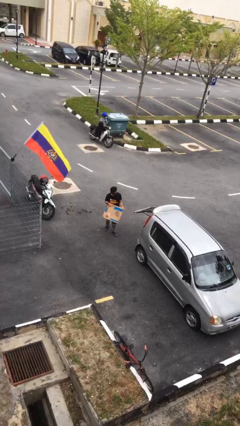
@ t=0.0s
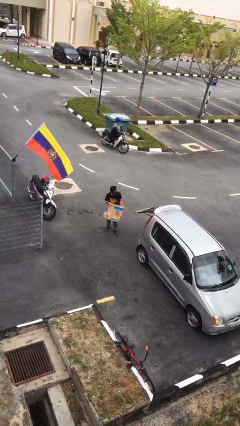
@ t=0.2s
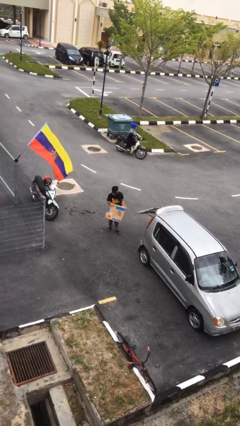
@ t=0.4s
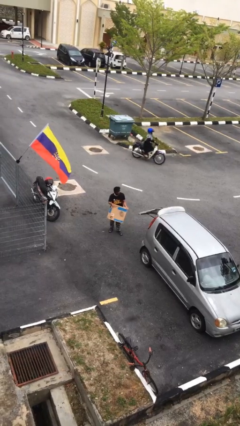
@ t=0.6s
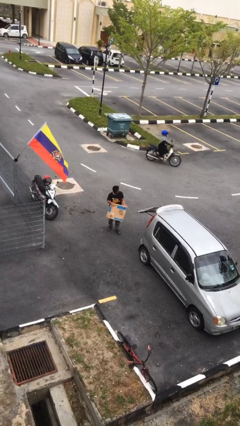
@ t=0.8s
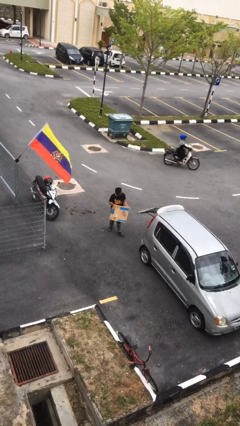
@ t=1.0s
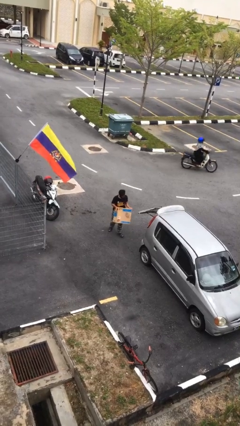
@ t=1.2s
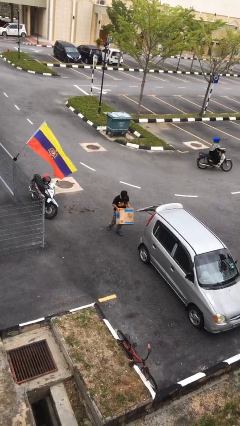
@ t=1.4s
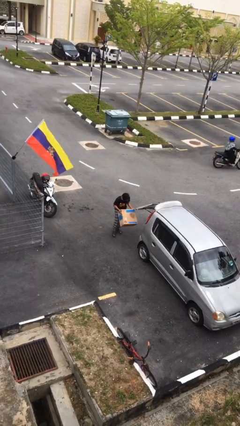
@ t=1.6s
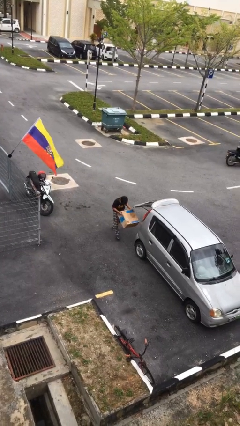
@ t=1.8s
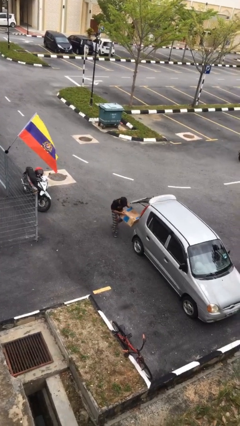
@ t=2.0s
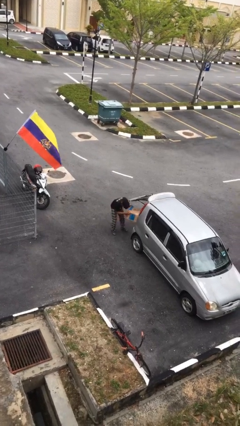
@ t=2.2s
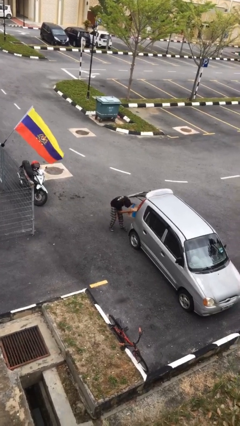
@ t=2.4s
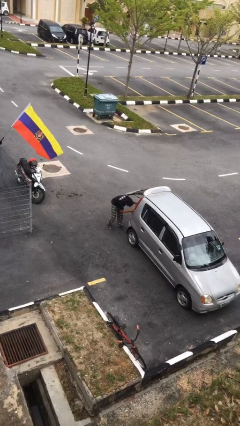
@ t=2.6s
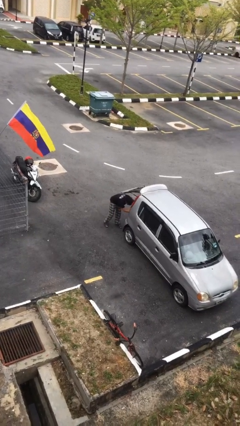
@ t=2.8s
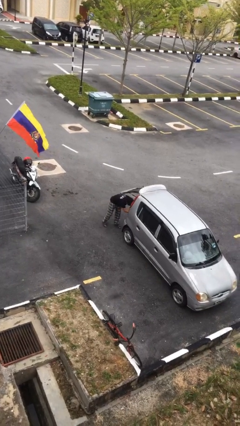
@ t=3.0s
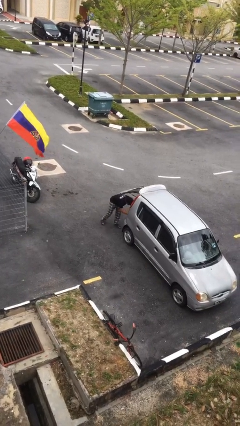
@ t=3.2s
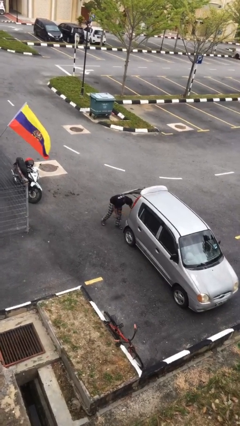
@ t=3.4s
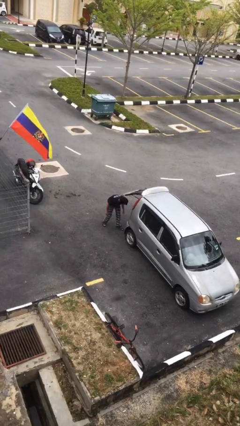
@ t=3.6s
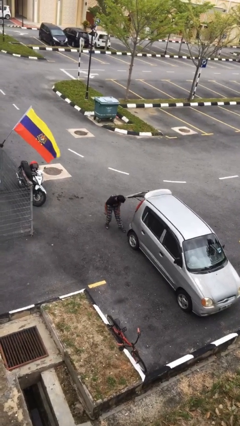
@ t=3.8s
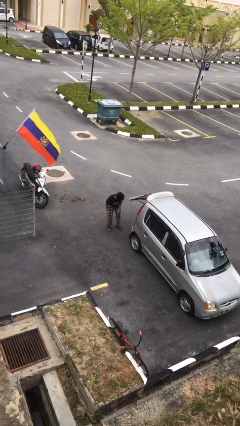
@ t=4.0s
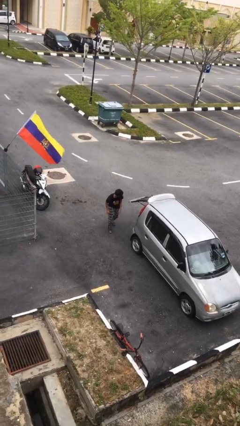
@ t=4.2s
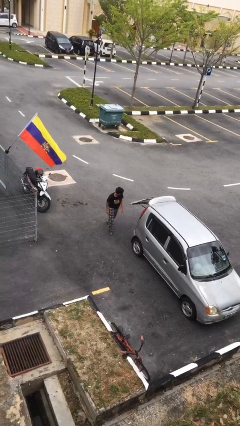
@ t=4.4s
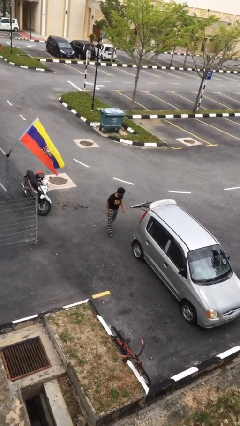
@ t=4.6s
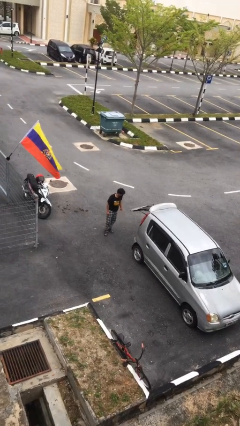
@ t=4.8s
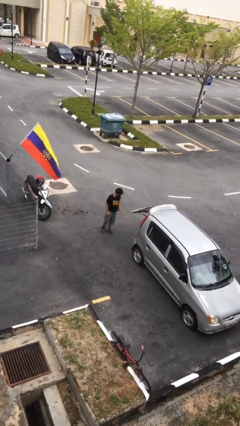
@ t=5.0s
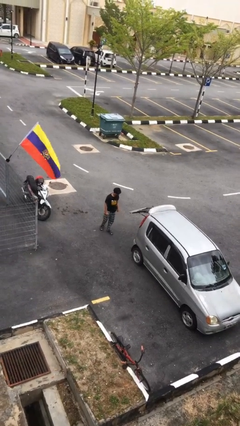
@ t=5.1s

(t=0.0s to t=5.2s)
person loads car

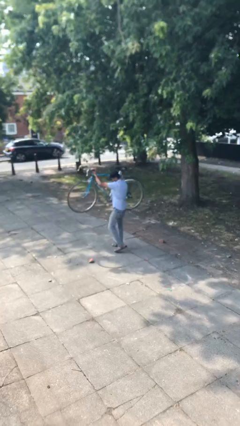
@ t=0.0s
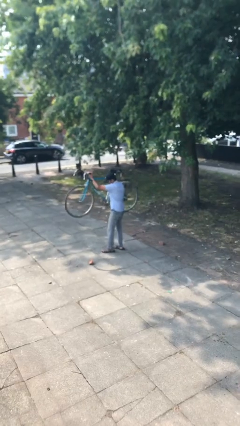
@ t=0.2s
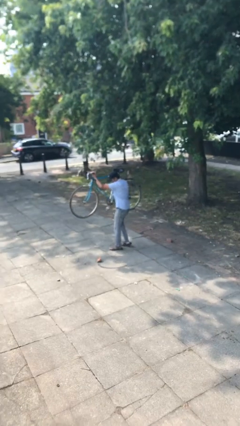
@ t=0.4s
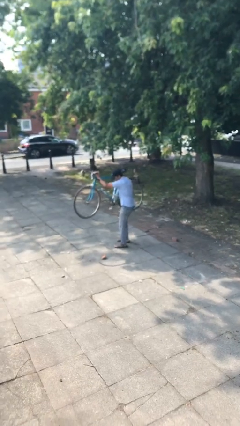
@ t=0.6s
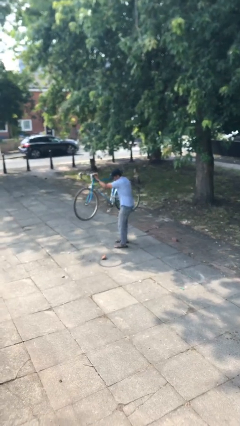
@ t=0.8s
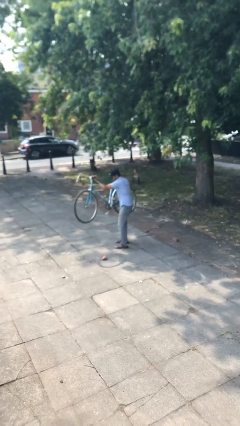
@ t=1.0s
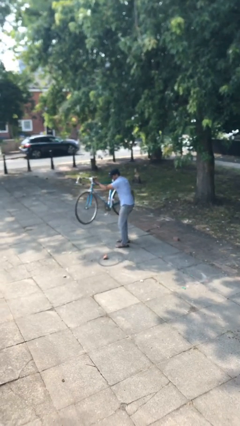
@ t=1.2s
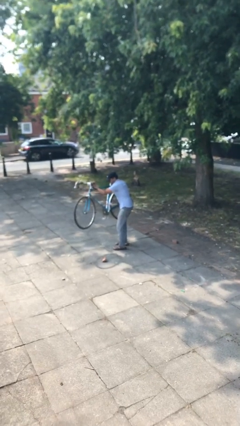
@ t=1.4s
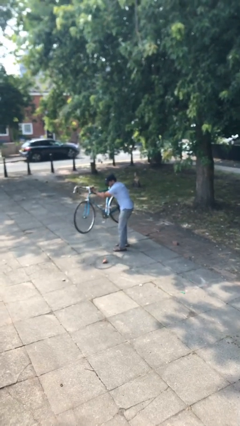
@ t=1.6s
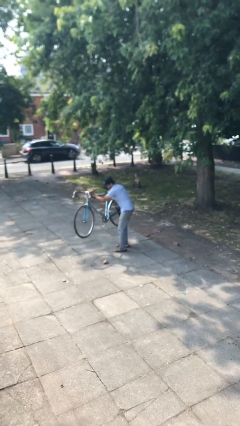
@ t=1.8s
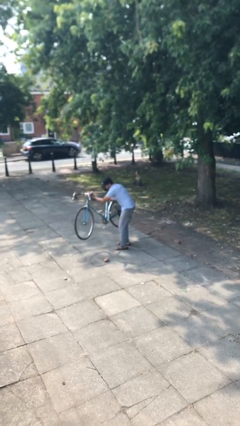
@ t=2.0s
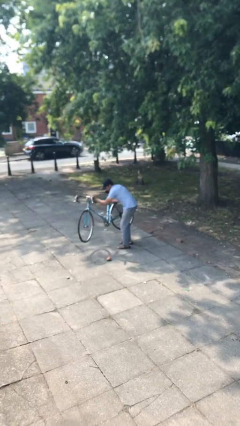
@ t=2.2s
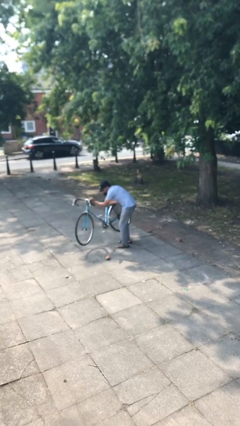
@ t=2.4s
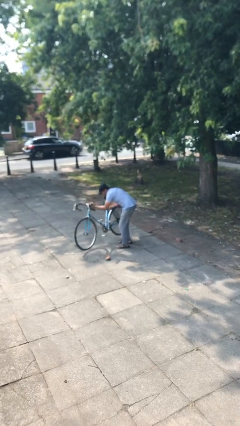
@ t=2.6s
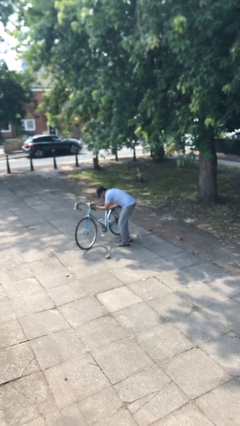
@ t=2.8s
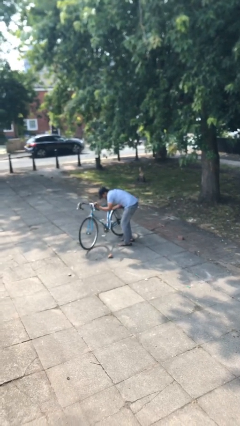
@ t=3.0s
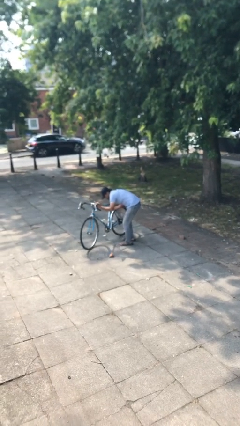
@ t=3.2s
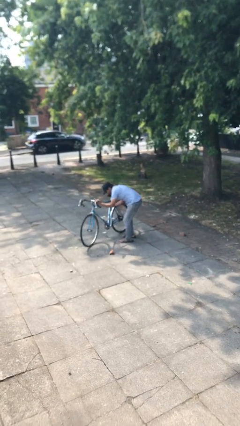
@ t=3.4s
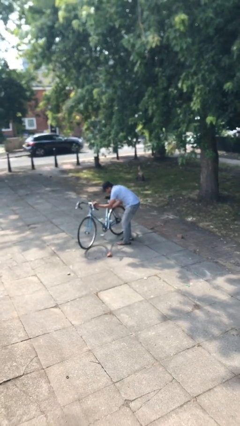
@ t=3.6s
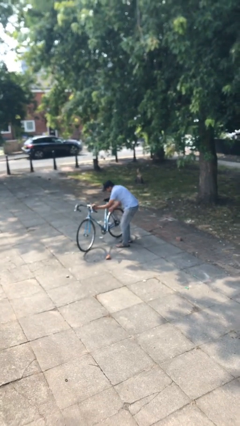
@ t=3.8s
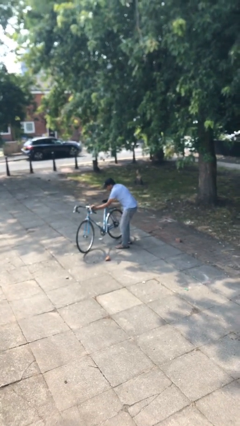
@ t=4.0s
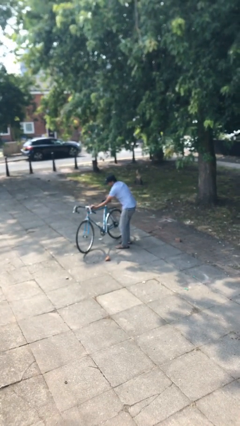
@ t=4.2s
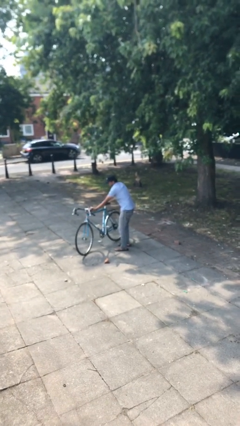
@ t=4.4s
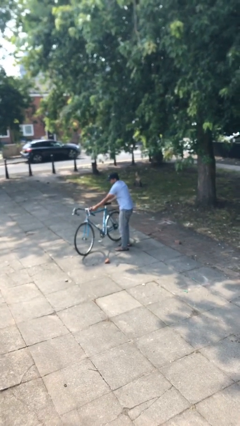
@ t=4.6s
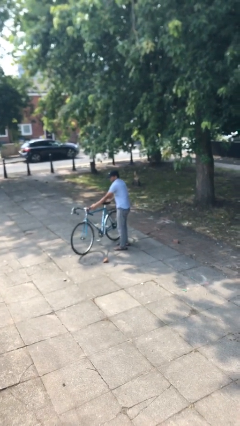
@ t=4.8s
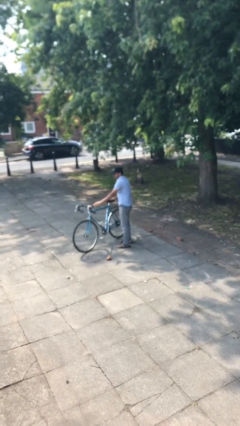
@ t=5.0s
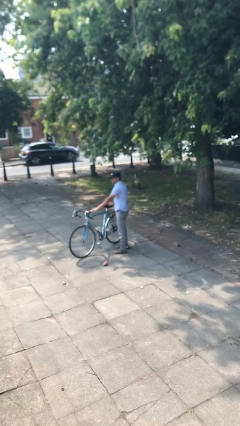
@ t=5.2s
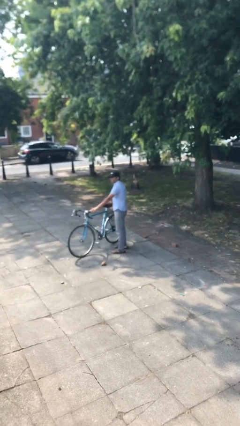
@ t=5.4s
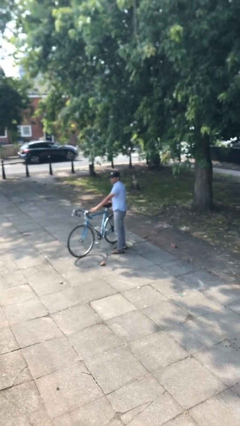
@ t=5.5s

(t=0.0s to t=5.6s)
person puts down object on floor

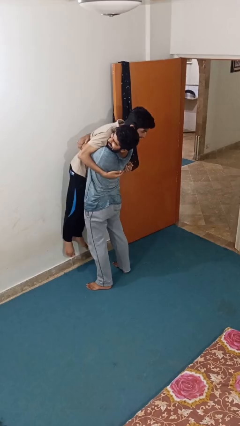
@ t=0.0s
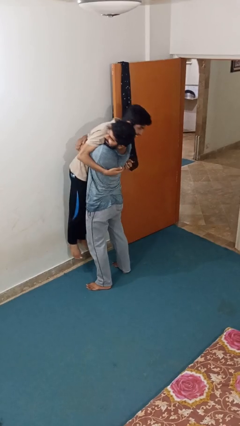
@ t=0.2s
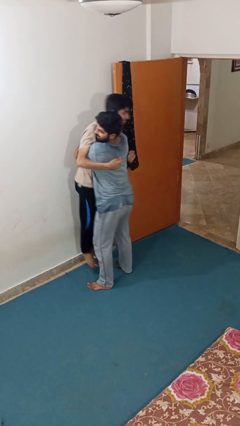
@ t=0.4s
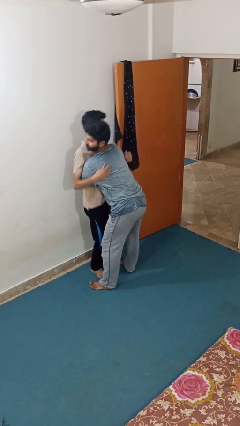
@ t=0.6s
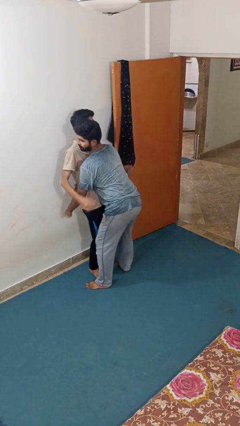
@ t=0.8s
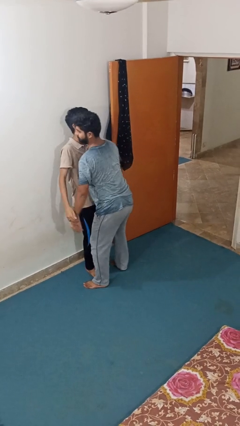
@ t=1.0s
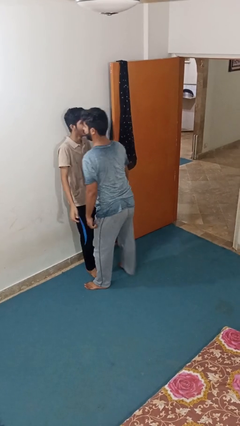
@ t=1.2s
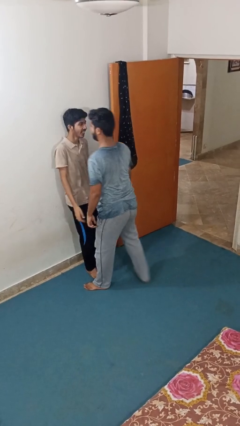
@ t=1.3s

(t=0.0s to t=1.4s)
person puts down person

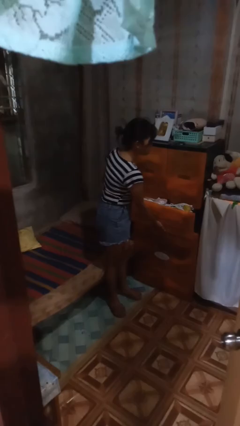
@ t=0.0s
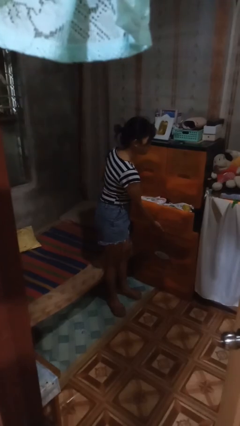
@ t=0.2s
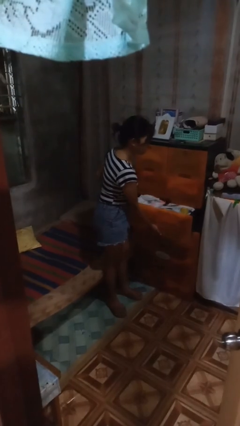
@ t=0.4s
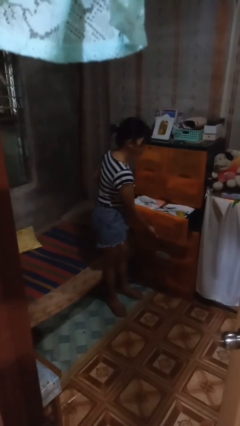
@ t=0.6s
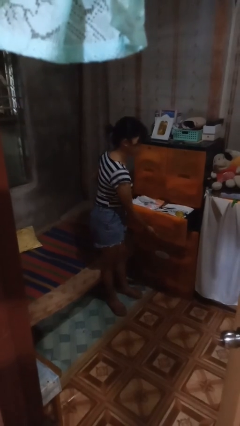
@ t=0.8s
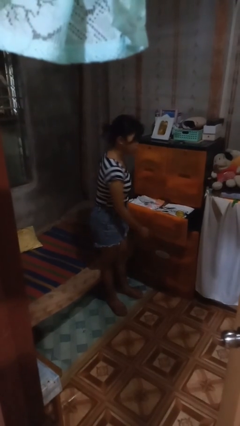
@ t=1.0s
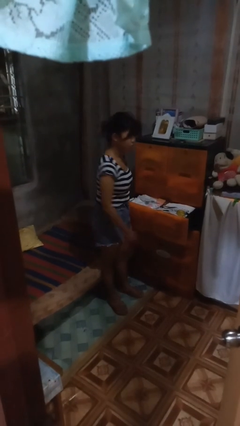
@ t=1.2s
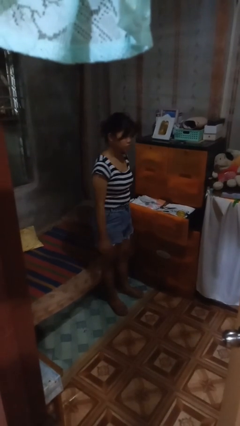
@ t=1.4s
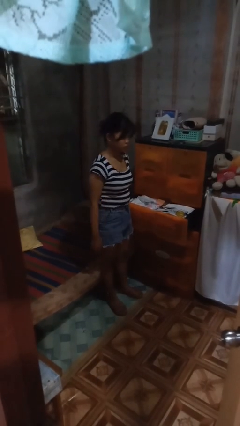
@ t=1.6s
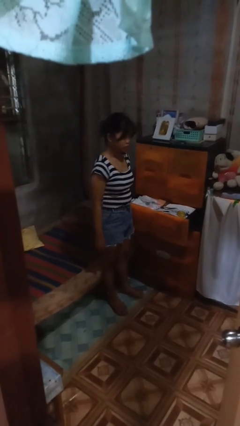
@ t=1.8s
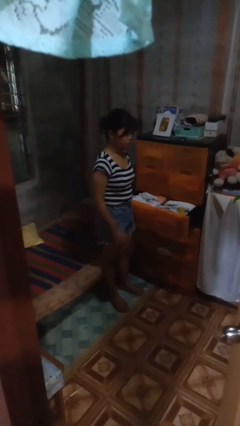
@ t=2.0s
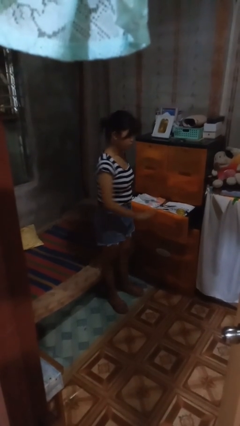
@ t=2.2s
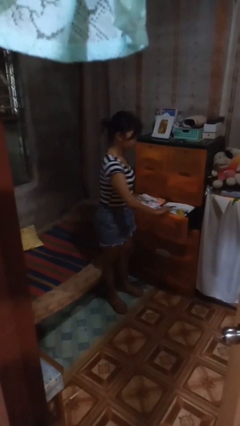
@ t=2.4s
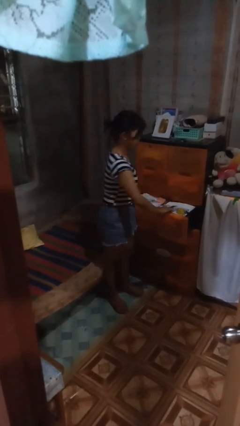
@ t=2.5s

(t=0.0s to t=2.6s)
person opens dresser drawer

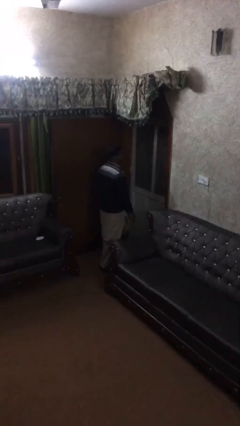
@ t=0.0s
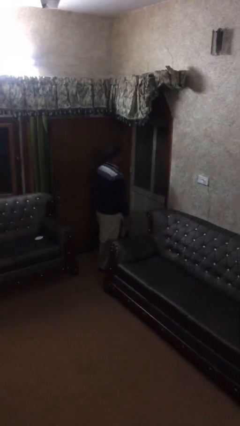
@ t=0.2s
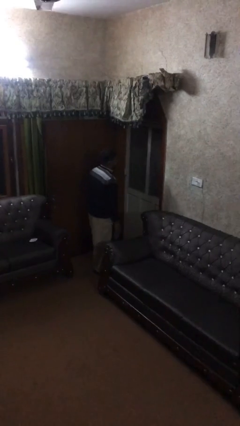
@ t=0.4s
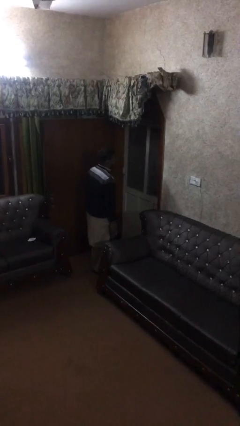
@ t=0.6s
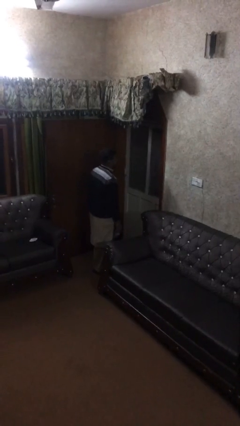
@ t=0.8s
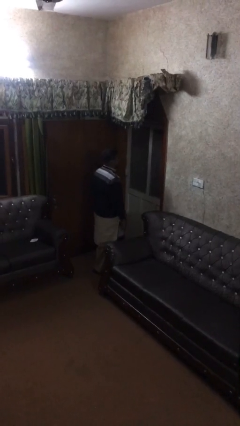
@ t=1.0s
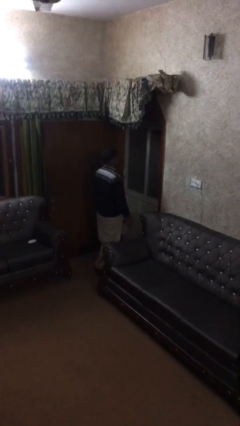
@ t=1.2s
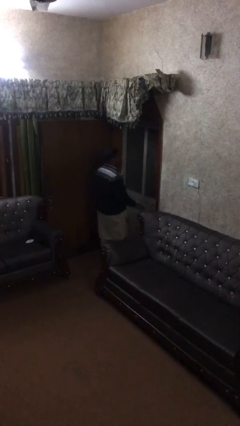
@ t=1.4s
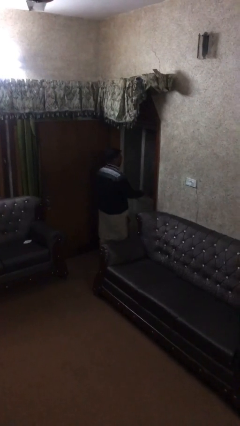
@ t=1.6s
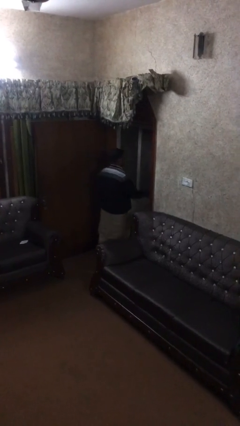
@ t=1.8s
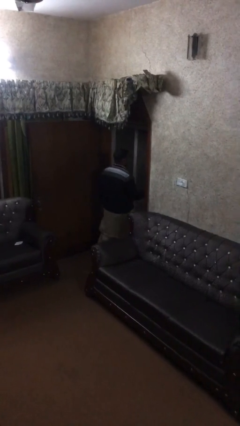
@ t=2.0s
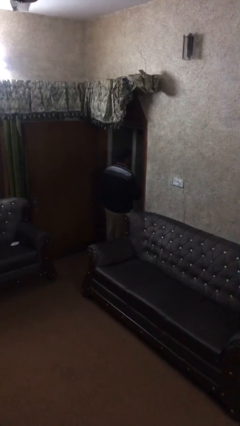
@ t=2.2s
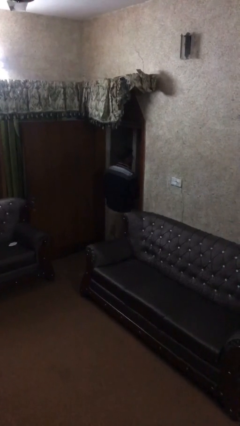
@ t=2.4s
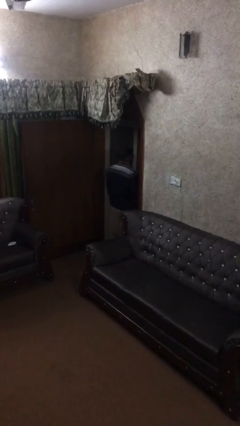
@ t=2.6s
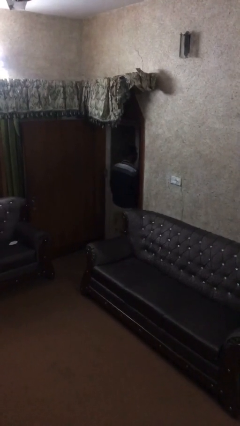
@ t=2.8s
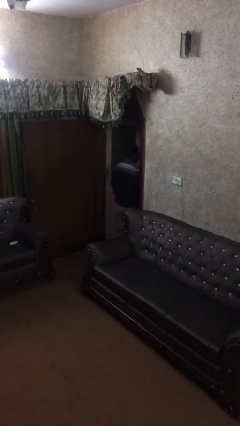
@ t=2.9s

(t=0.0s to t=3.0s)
person opens facility door
